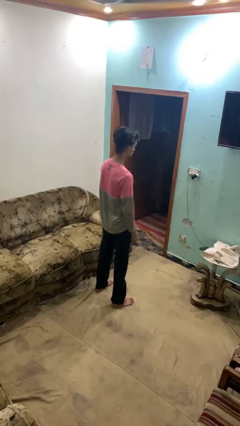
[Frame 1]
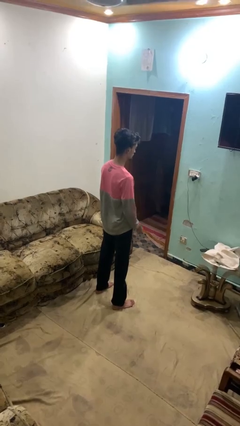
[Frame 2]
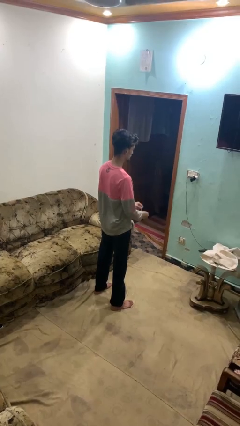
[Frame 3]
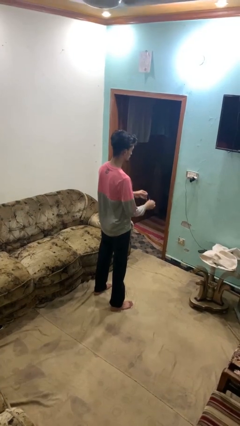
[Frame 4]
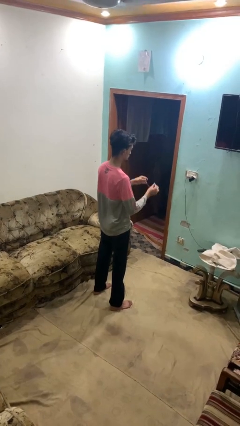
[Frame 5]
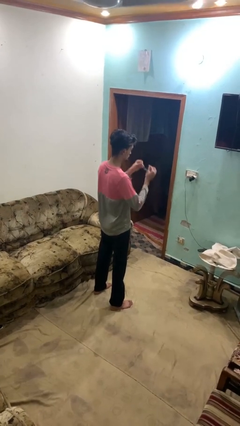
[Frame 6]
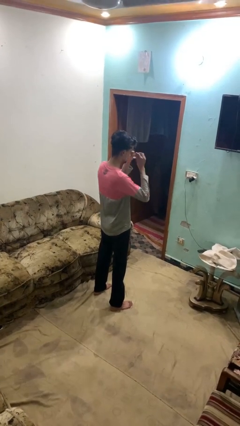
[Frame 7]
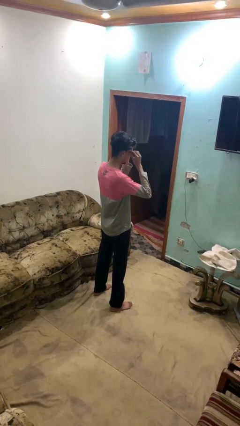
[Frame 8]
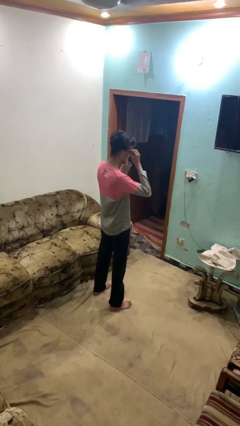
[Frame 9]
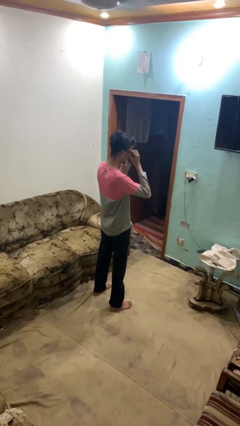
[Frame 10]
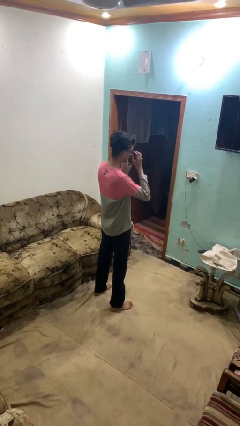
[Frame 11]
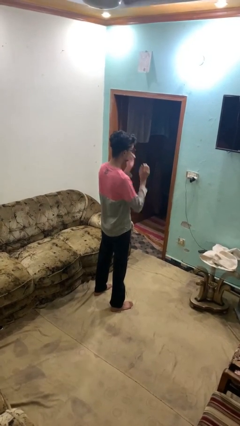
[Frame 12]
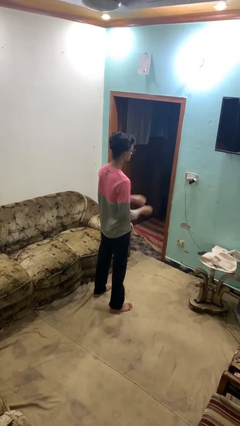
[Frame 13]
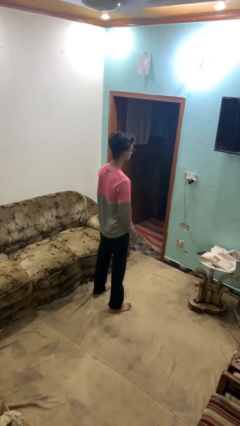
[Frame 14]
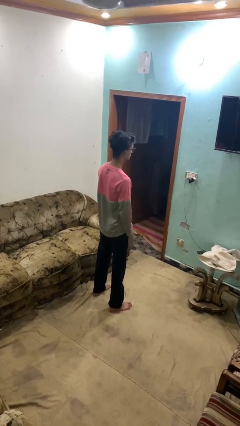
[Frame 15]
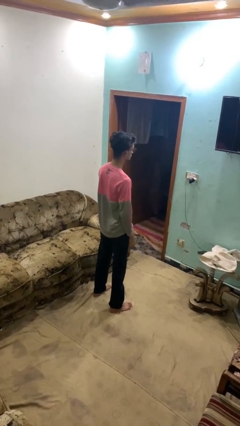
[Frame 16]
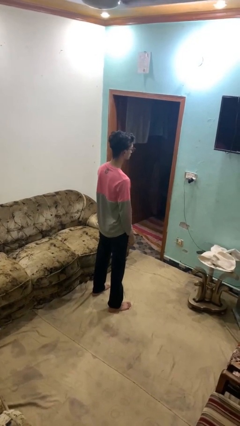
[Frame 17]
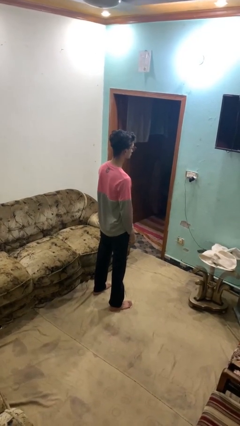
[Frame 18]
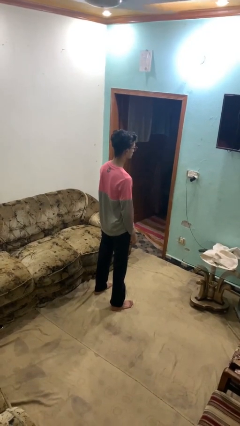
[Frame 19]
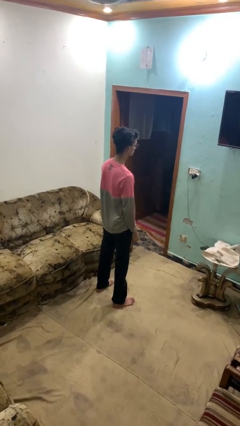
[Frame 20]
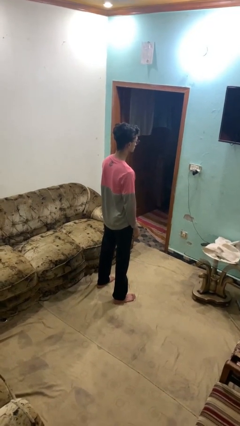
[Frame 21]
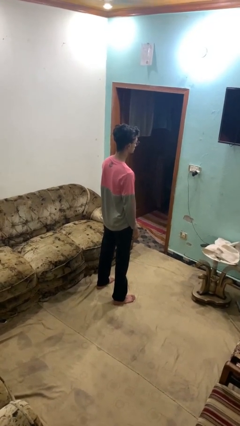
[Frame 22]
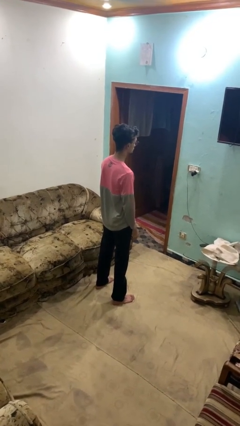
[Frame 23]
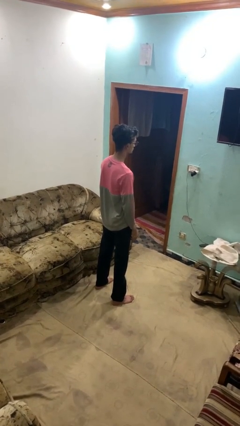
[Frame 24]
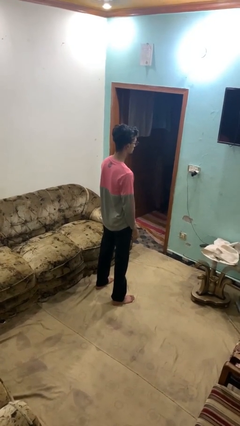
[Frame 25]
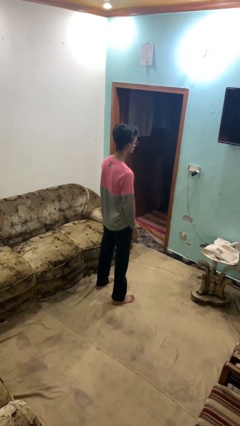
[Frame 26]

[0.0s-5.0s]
person puts on glasses

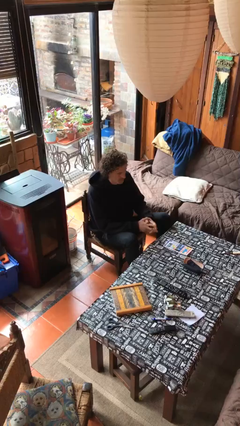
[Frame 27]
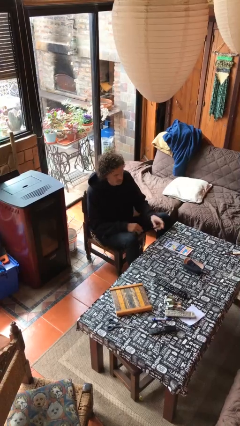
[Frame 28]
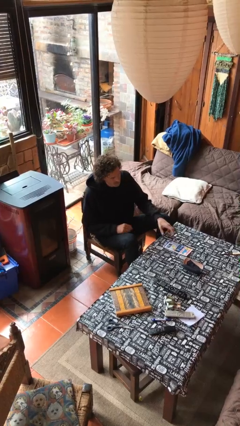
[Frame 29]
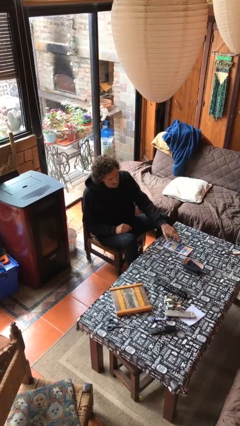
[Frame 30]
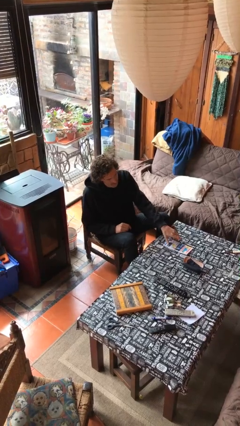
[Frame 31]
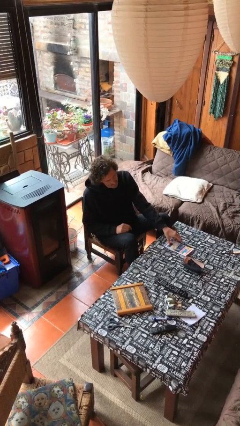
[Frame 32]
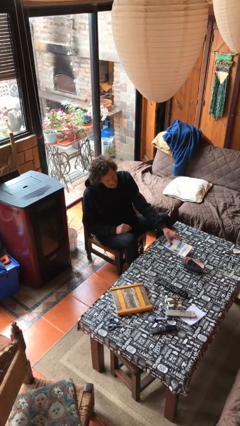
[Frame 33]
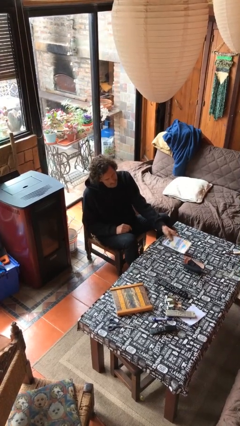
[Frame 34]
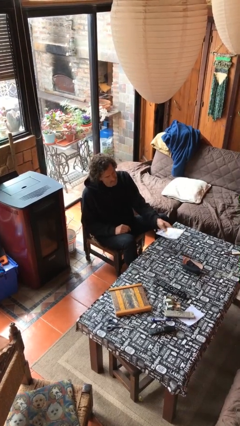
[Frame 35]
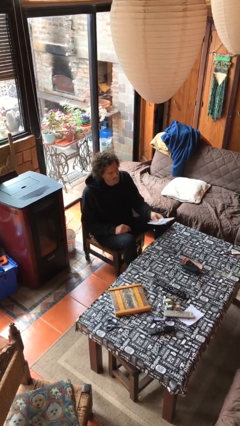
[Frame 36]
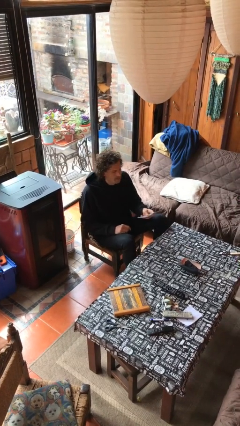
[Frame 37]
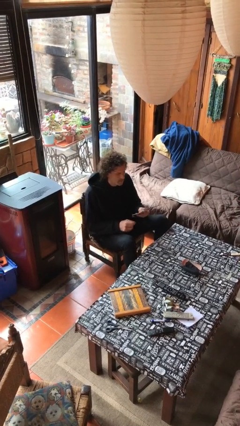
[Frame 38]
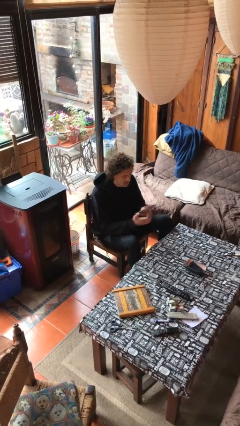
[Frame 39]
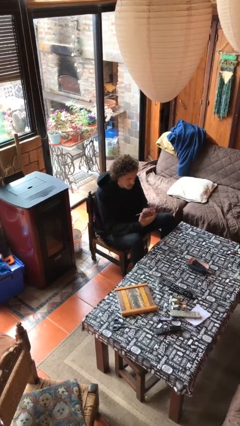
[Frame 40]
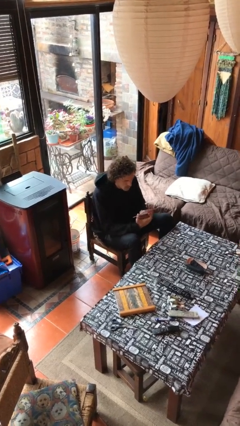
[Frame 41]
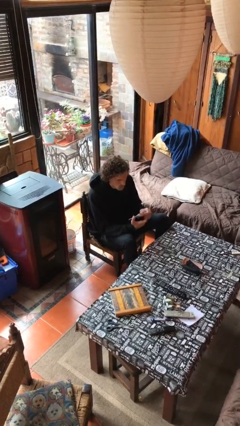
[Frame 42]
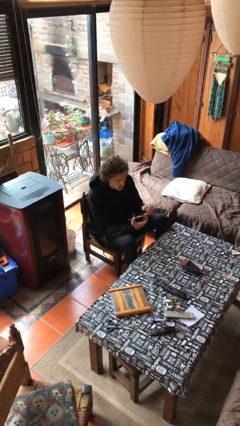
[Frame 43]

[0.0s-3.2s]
person picks up object from table

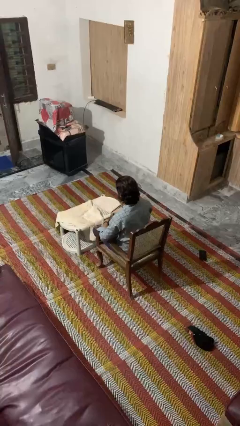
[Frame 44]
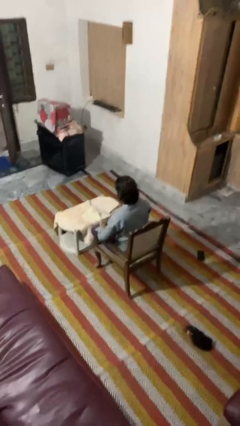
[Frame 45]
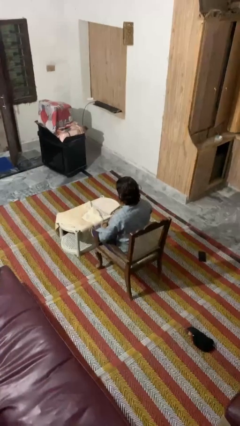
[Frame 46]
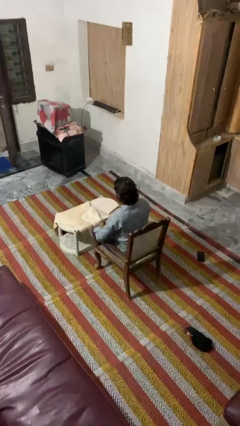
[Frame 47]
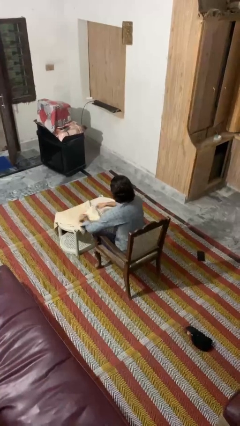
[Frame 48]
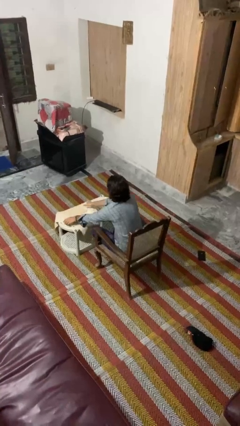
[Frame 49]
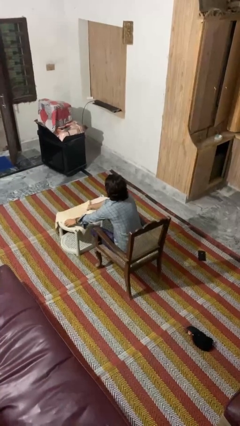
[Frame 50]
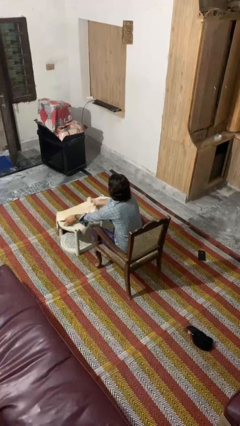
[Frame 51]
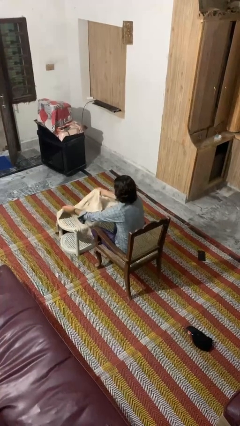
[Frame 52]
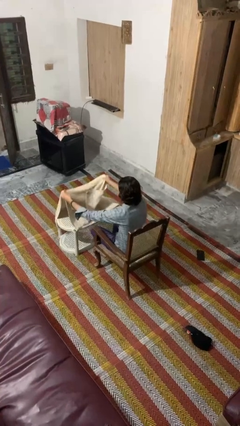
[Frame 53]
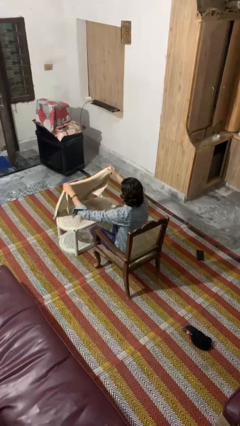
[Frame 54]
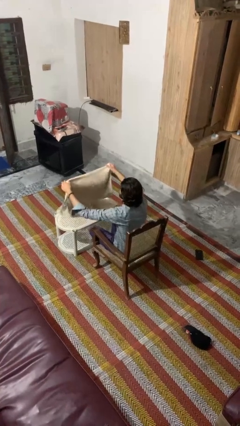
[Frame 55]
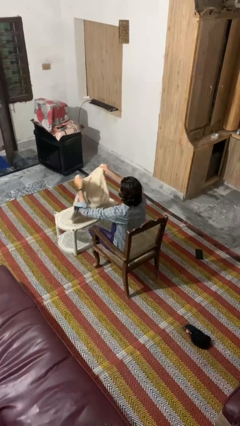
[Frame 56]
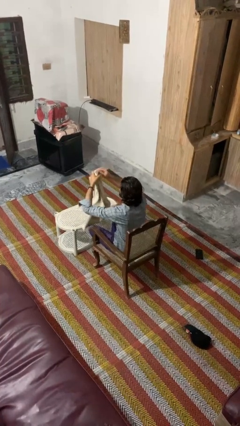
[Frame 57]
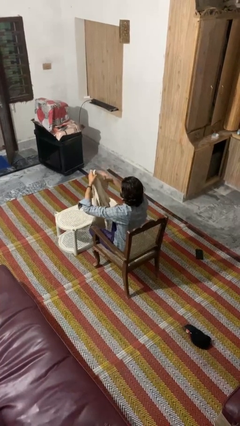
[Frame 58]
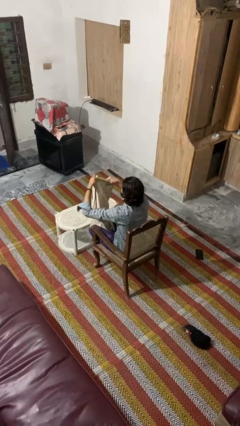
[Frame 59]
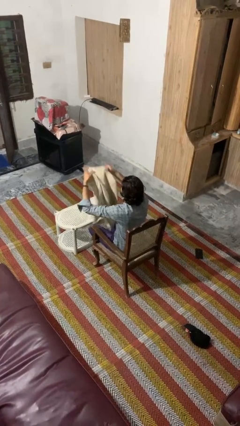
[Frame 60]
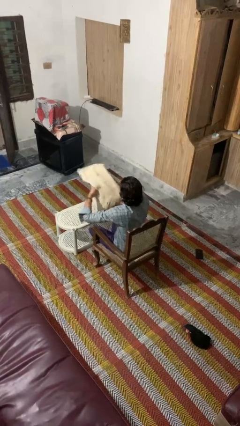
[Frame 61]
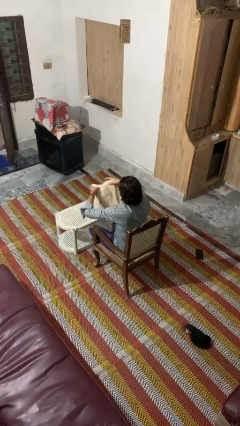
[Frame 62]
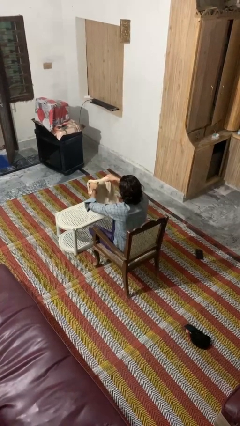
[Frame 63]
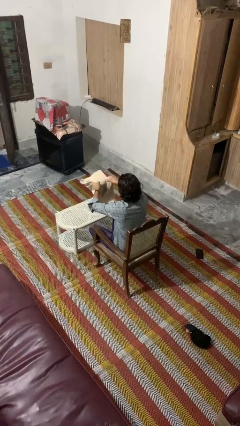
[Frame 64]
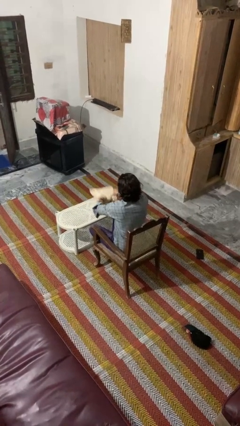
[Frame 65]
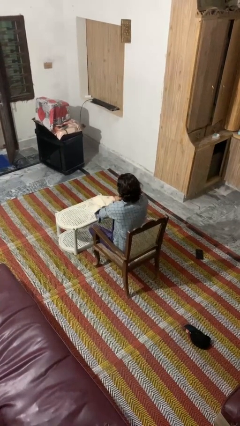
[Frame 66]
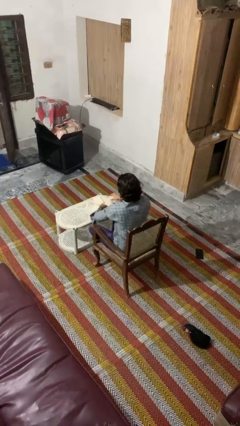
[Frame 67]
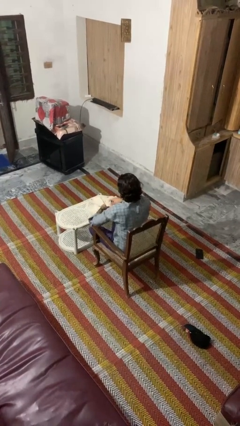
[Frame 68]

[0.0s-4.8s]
person folds towel

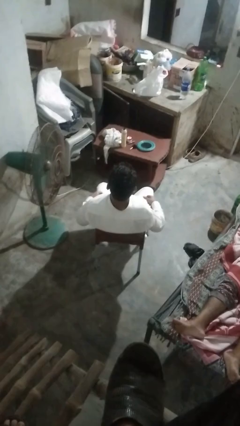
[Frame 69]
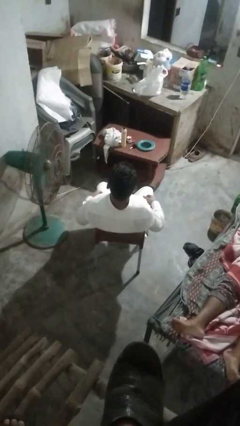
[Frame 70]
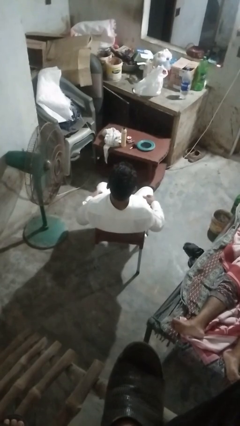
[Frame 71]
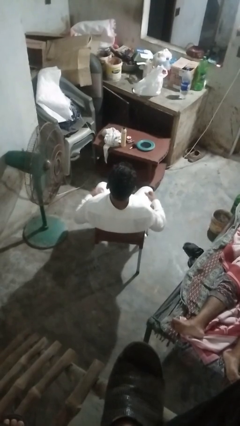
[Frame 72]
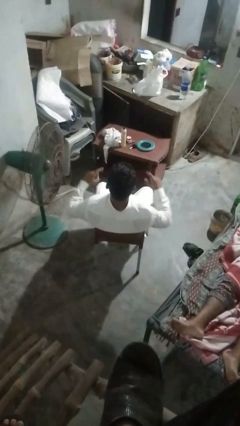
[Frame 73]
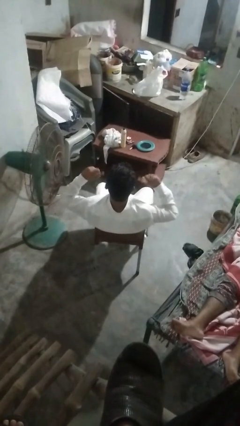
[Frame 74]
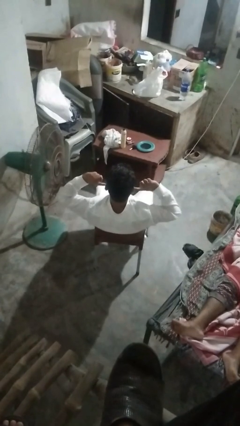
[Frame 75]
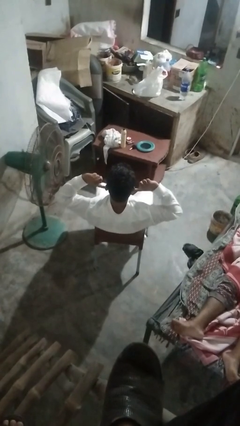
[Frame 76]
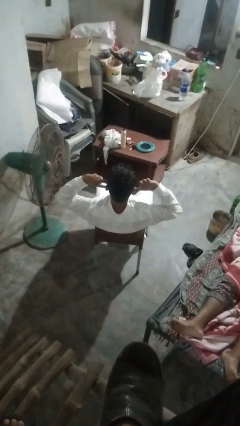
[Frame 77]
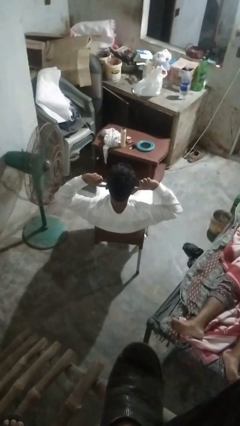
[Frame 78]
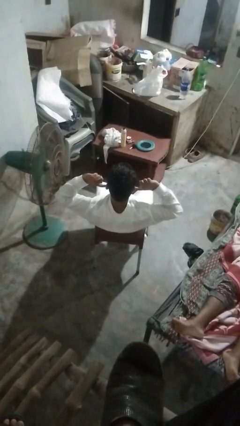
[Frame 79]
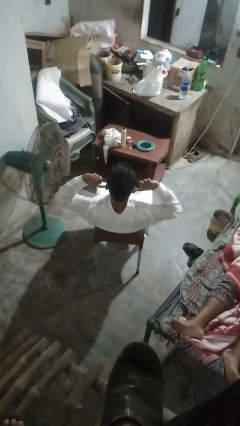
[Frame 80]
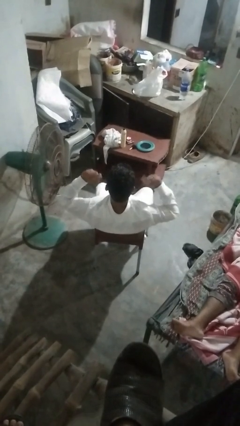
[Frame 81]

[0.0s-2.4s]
person puts fingers in ear

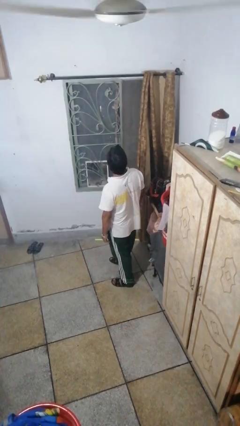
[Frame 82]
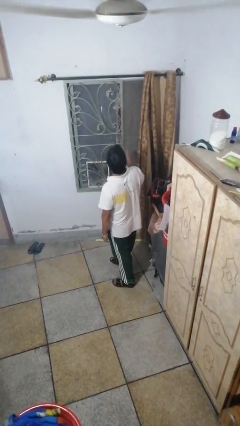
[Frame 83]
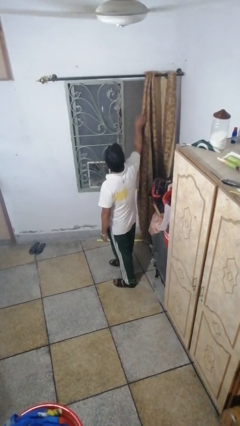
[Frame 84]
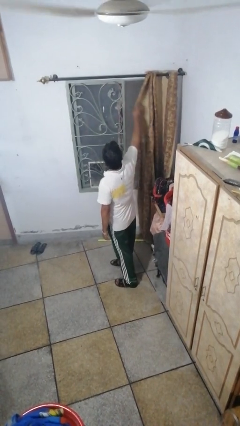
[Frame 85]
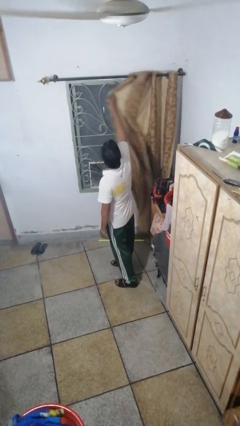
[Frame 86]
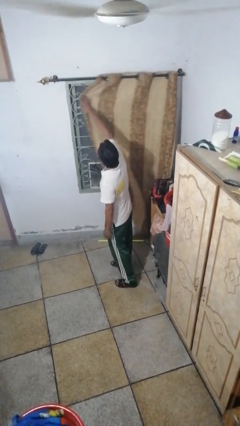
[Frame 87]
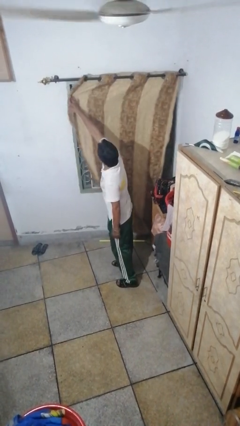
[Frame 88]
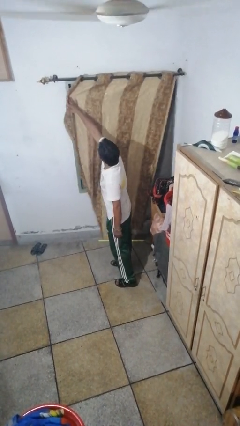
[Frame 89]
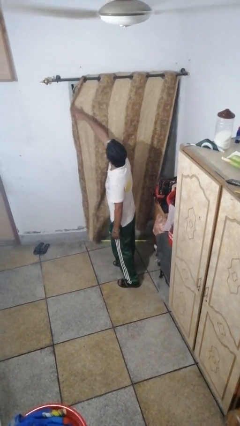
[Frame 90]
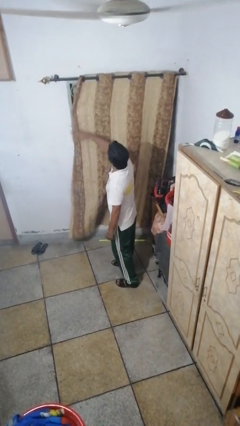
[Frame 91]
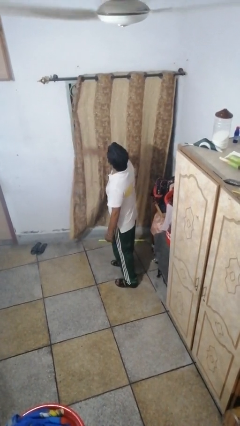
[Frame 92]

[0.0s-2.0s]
person closes curtains
